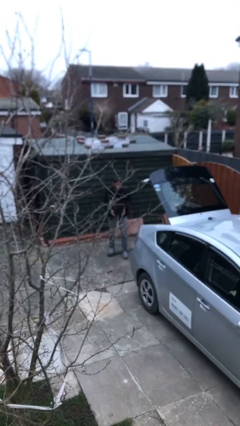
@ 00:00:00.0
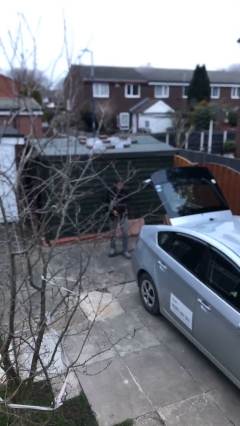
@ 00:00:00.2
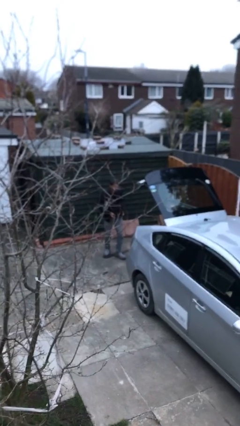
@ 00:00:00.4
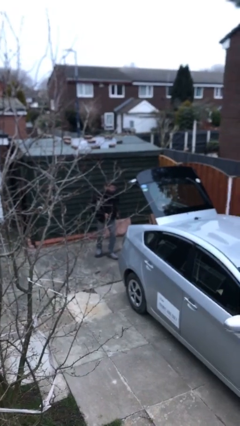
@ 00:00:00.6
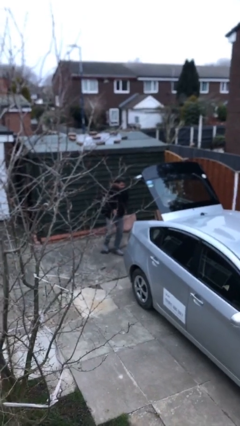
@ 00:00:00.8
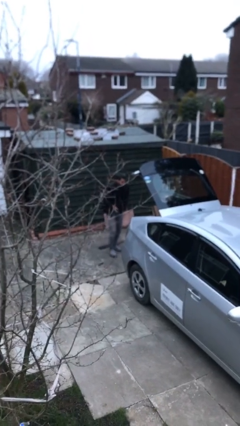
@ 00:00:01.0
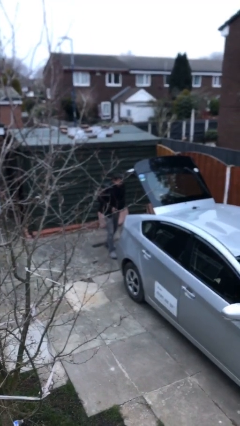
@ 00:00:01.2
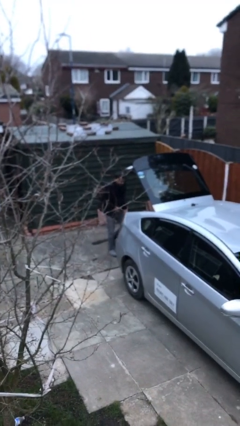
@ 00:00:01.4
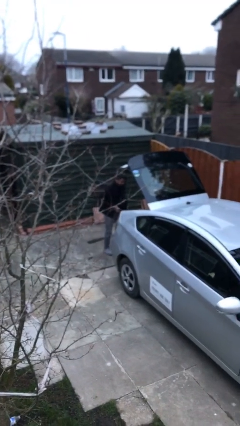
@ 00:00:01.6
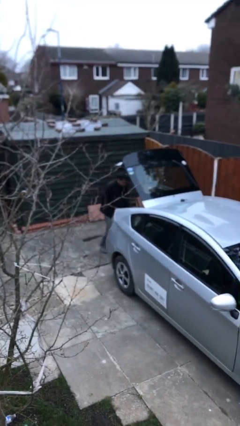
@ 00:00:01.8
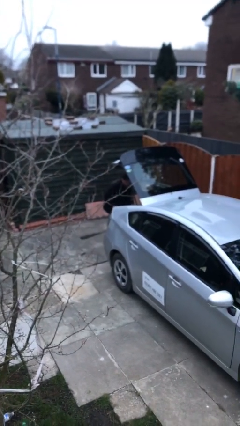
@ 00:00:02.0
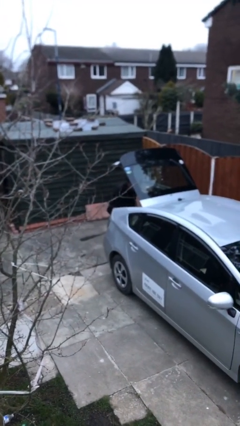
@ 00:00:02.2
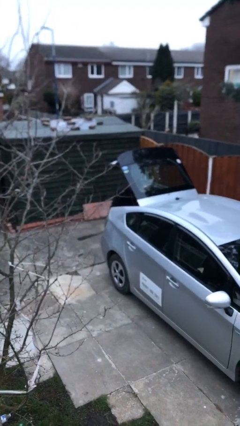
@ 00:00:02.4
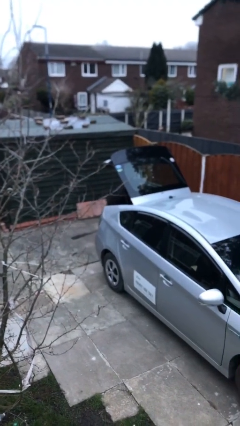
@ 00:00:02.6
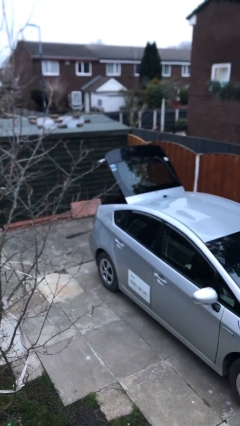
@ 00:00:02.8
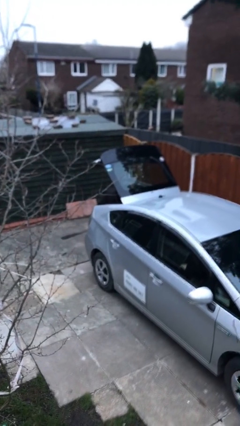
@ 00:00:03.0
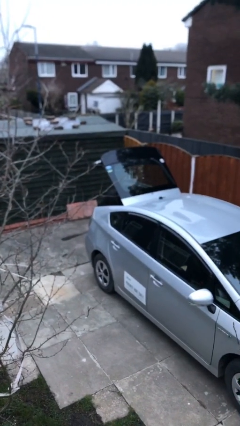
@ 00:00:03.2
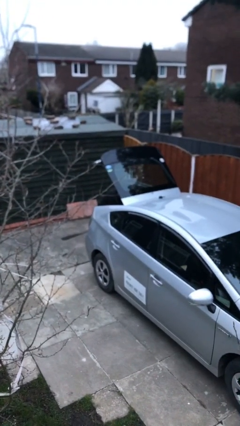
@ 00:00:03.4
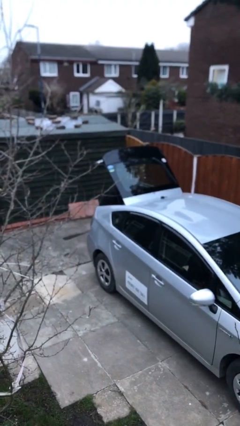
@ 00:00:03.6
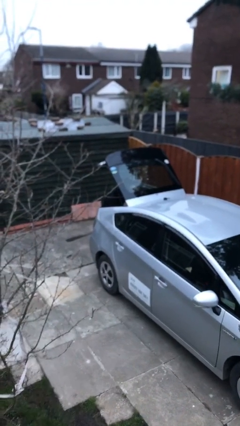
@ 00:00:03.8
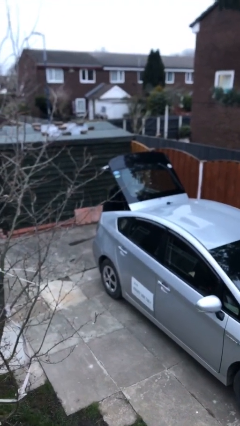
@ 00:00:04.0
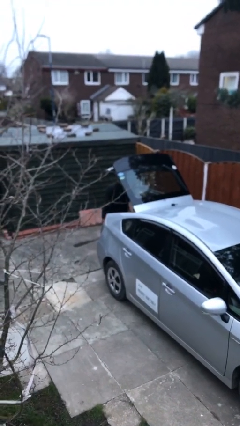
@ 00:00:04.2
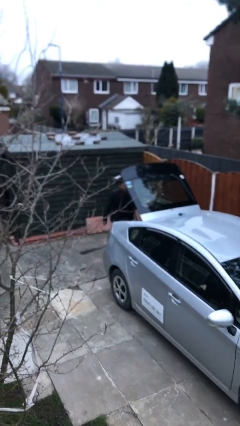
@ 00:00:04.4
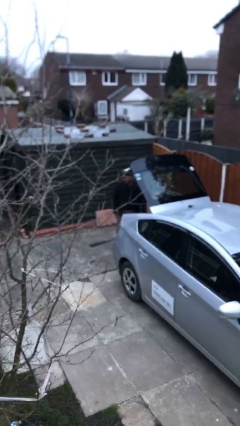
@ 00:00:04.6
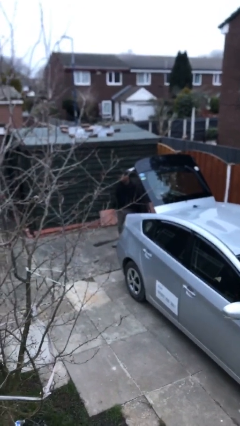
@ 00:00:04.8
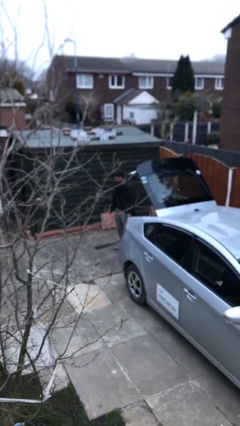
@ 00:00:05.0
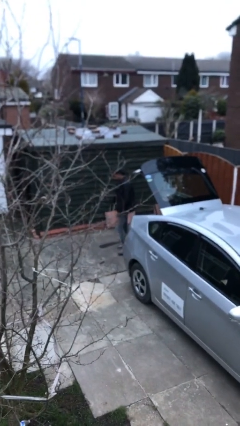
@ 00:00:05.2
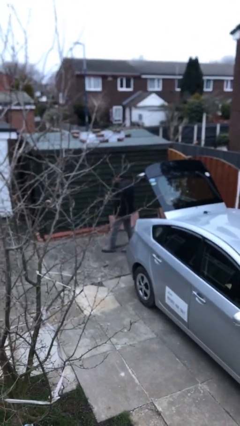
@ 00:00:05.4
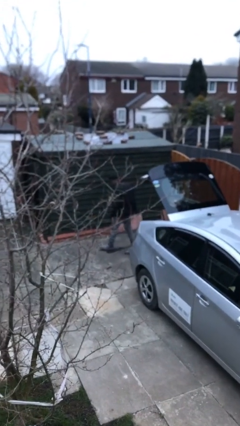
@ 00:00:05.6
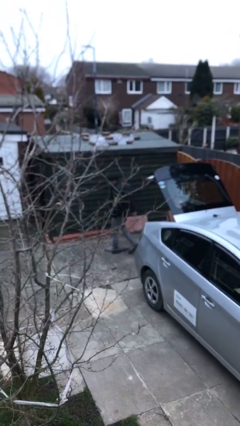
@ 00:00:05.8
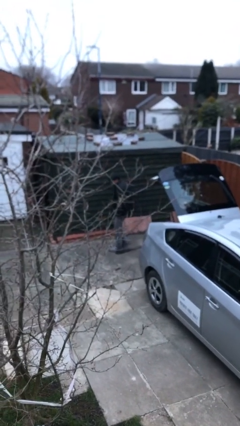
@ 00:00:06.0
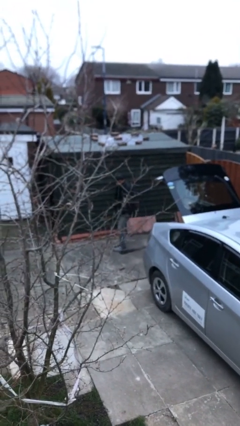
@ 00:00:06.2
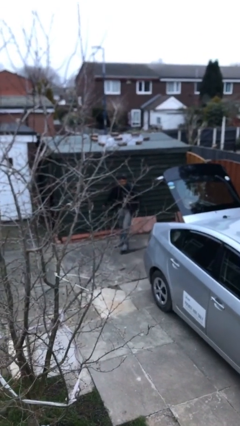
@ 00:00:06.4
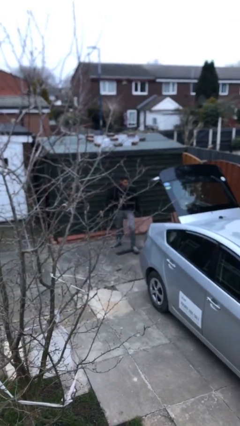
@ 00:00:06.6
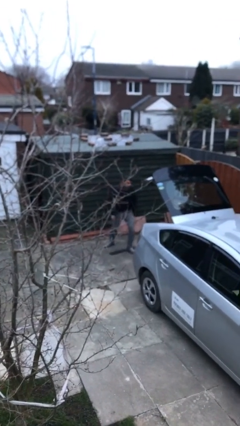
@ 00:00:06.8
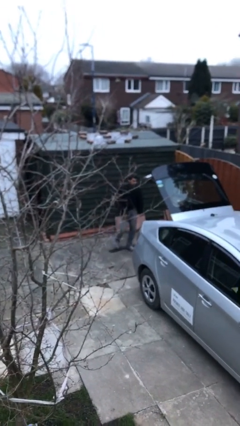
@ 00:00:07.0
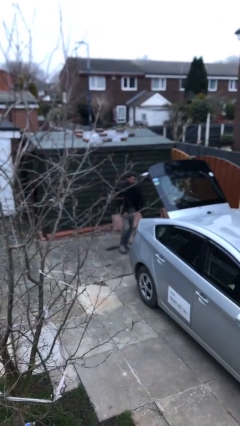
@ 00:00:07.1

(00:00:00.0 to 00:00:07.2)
person loads car

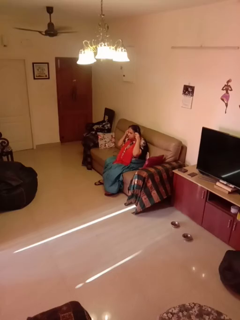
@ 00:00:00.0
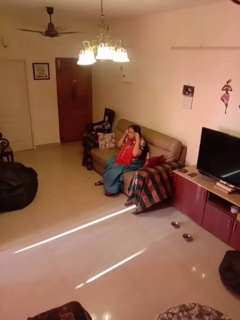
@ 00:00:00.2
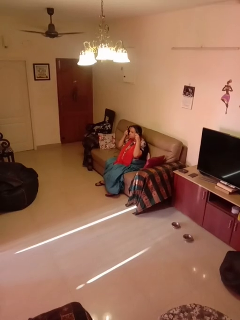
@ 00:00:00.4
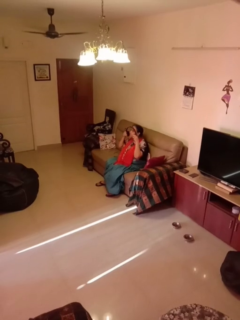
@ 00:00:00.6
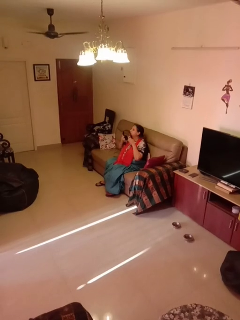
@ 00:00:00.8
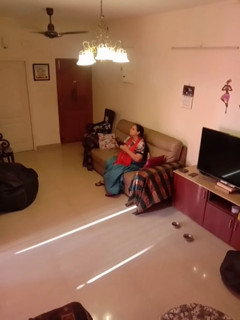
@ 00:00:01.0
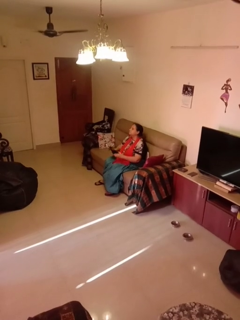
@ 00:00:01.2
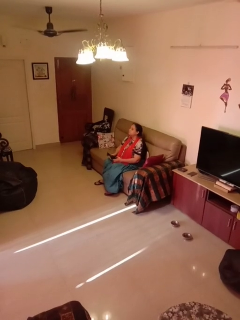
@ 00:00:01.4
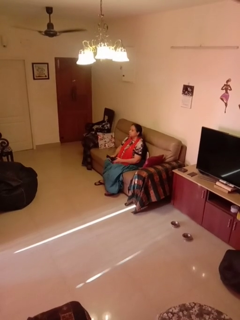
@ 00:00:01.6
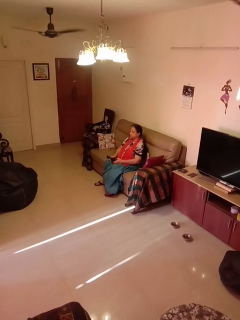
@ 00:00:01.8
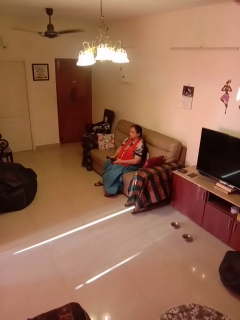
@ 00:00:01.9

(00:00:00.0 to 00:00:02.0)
person takes off headphones

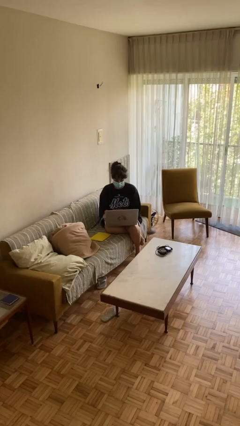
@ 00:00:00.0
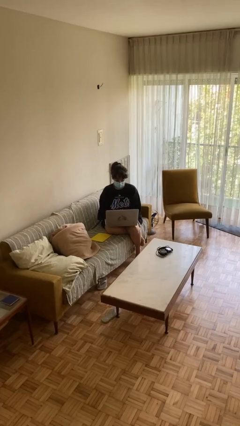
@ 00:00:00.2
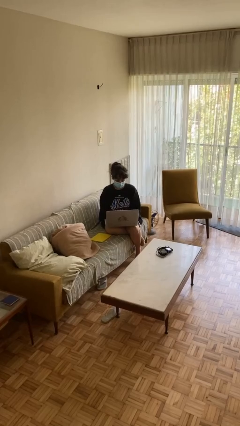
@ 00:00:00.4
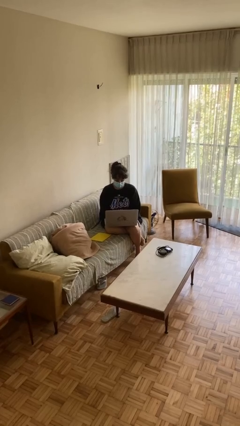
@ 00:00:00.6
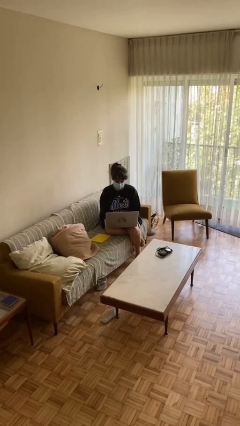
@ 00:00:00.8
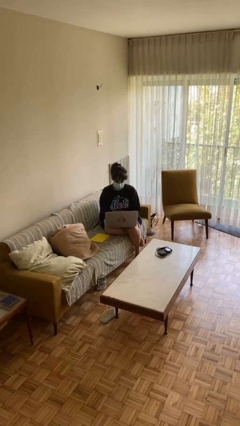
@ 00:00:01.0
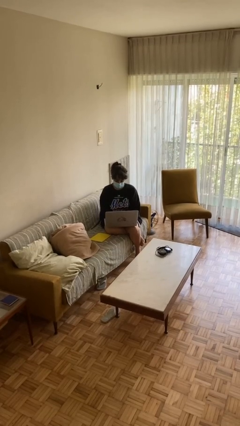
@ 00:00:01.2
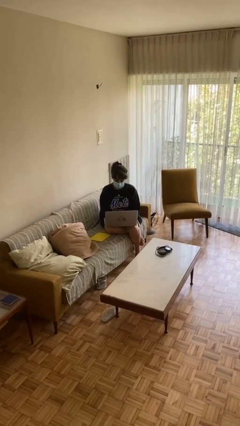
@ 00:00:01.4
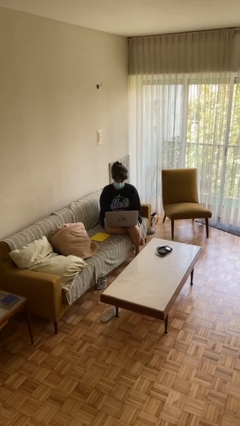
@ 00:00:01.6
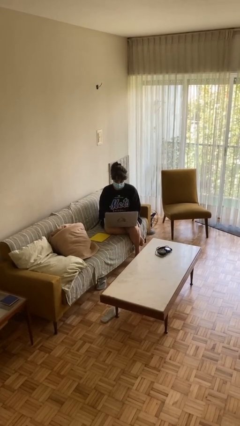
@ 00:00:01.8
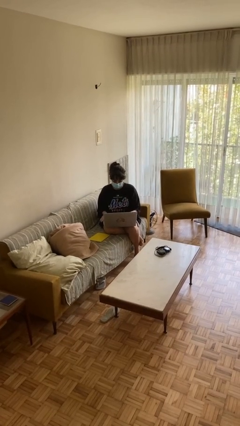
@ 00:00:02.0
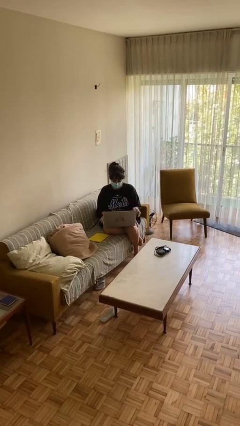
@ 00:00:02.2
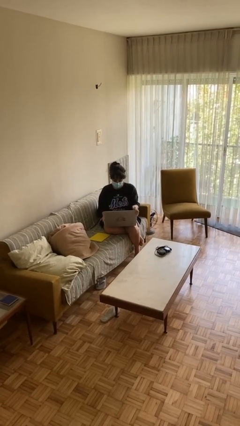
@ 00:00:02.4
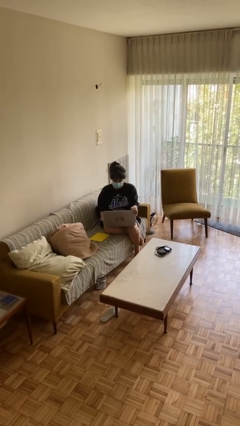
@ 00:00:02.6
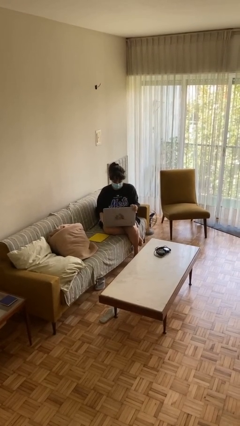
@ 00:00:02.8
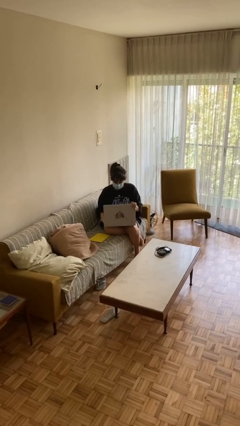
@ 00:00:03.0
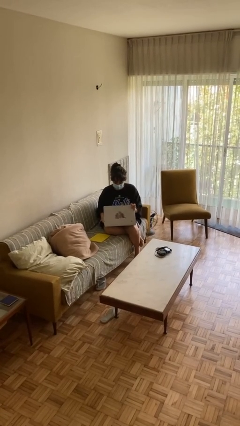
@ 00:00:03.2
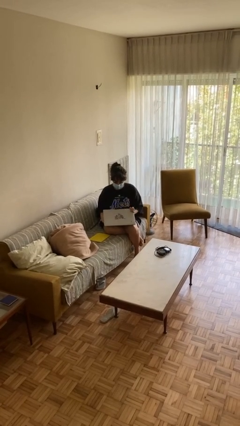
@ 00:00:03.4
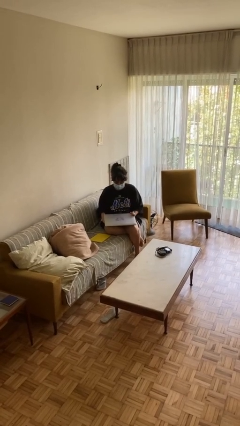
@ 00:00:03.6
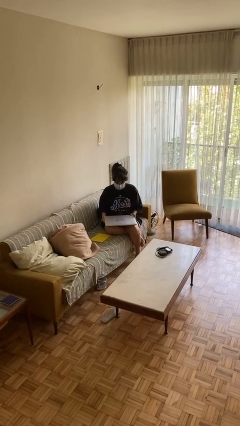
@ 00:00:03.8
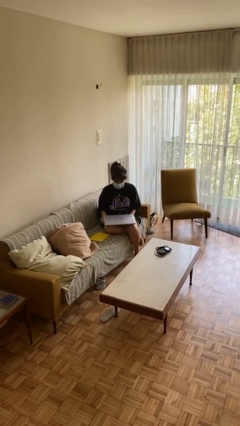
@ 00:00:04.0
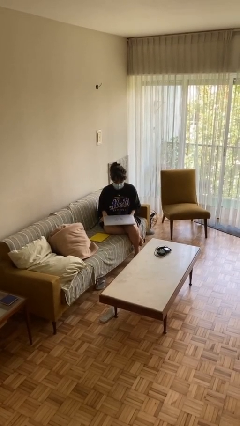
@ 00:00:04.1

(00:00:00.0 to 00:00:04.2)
person interacts with laptop

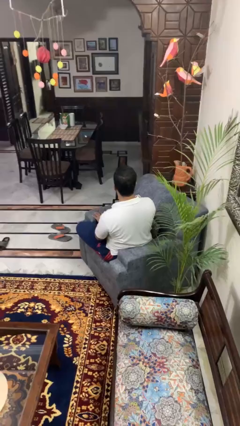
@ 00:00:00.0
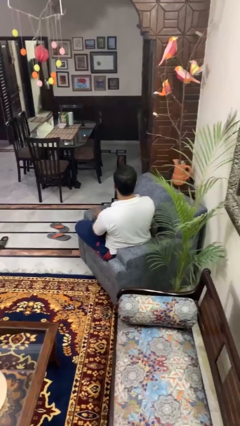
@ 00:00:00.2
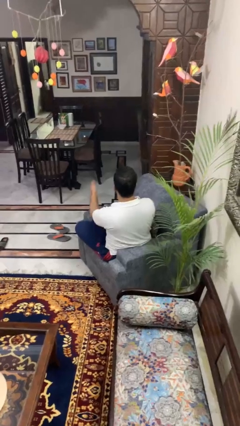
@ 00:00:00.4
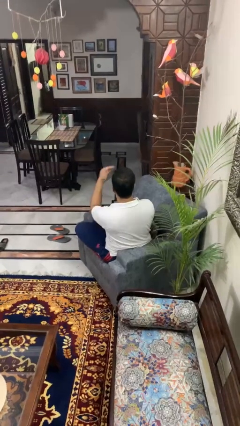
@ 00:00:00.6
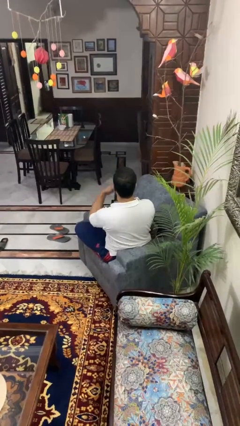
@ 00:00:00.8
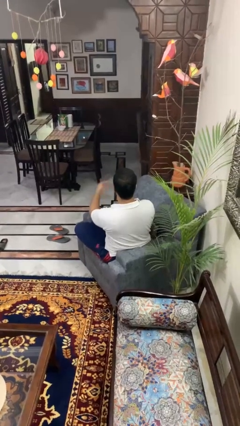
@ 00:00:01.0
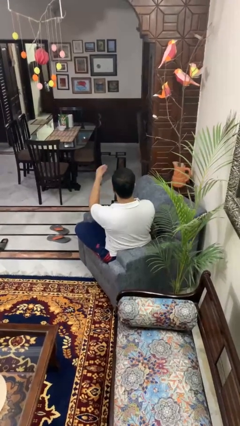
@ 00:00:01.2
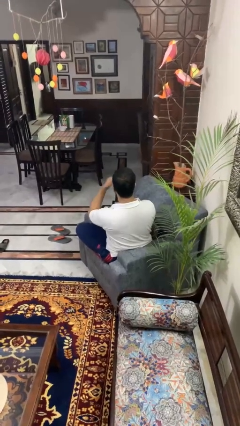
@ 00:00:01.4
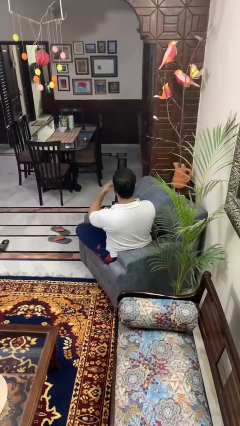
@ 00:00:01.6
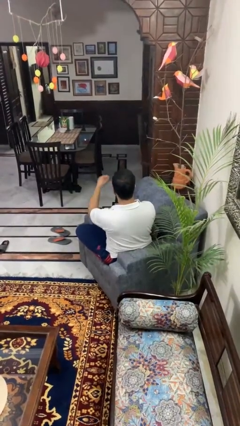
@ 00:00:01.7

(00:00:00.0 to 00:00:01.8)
person gestures come here

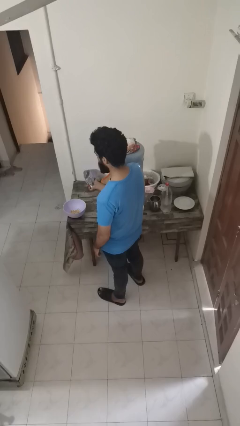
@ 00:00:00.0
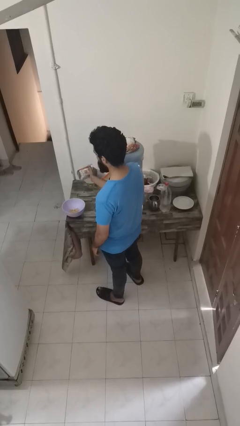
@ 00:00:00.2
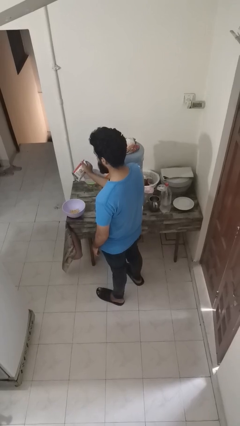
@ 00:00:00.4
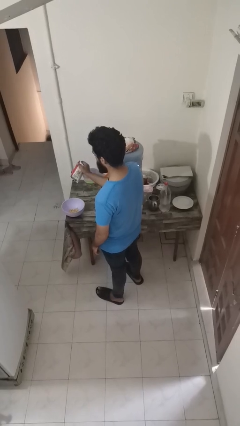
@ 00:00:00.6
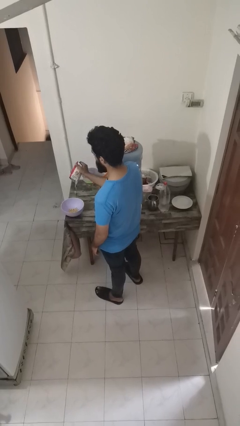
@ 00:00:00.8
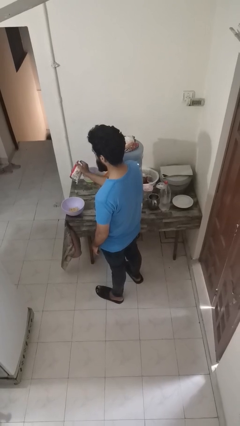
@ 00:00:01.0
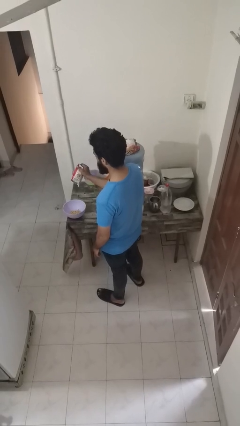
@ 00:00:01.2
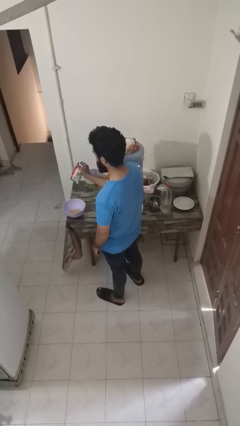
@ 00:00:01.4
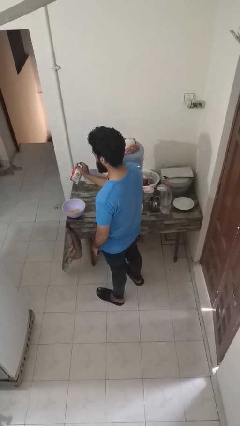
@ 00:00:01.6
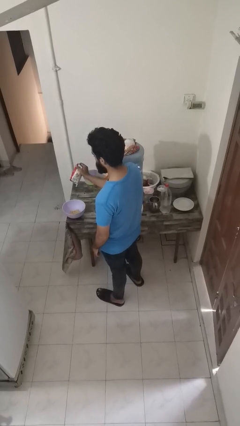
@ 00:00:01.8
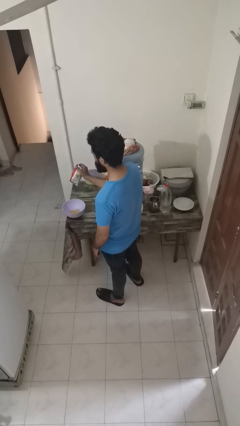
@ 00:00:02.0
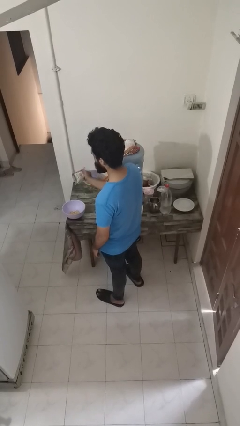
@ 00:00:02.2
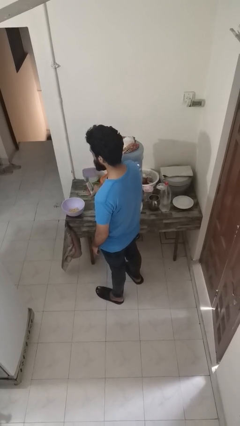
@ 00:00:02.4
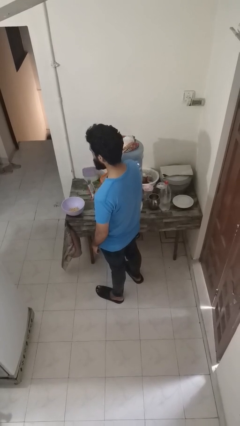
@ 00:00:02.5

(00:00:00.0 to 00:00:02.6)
person pours into bowl

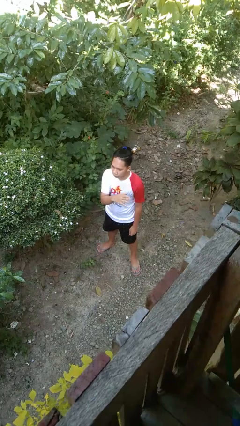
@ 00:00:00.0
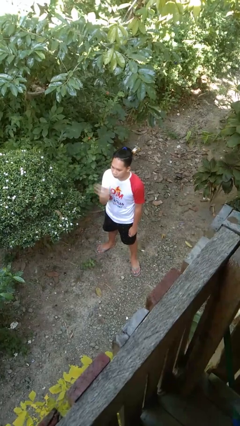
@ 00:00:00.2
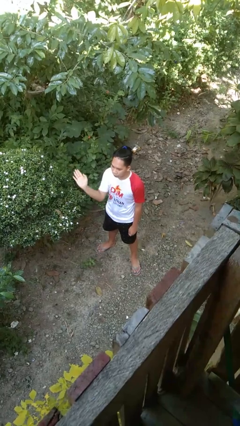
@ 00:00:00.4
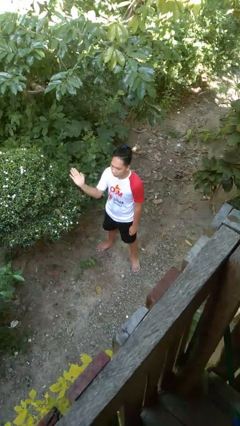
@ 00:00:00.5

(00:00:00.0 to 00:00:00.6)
person gestures swipe right
